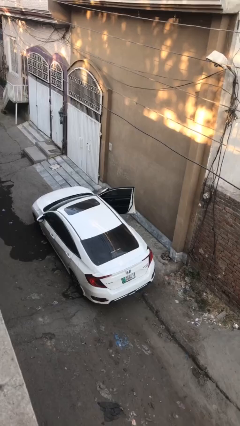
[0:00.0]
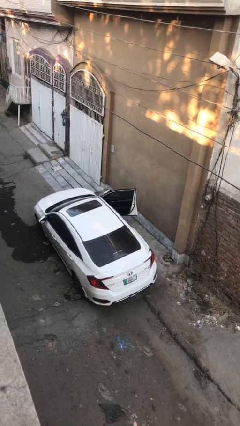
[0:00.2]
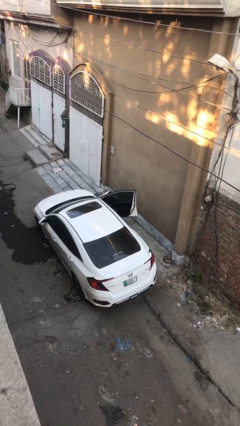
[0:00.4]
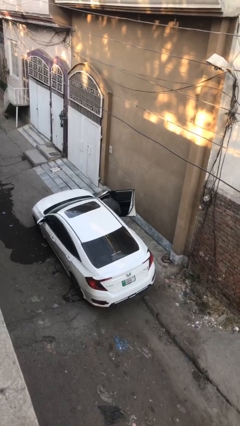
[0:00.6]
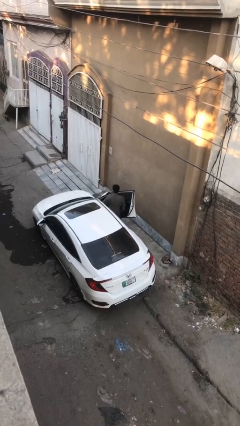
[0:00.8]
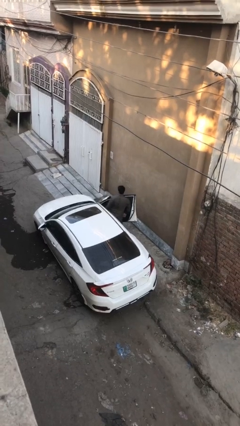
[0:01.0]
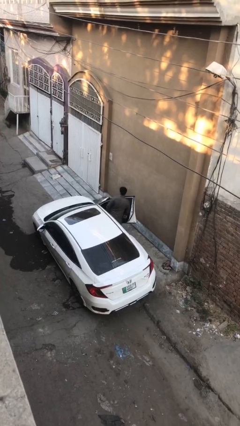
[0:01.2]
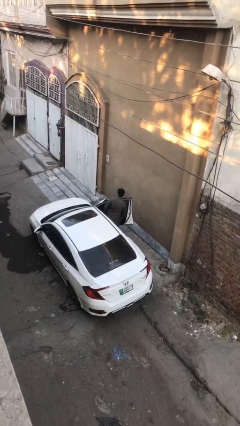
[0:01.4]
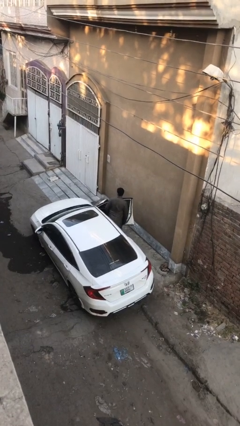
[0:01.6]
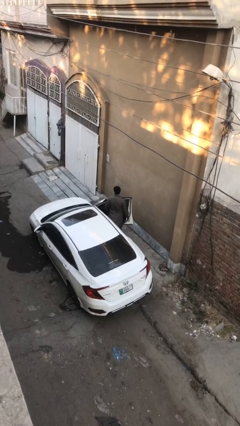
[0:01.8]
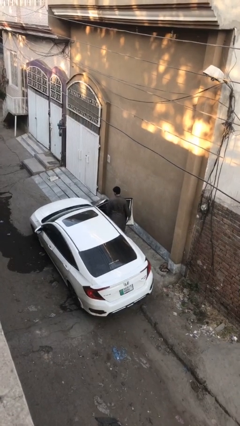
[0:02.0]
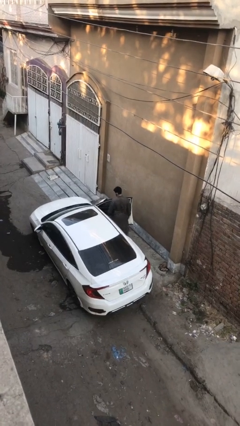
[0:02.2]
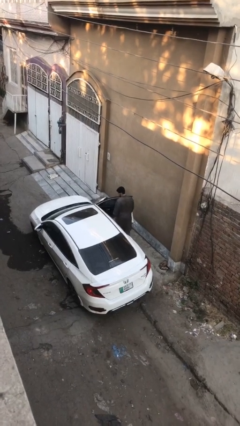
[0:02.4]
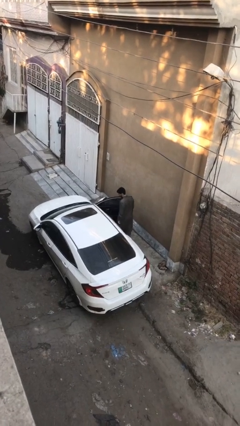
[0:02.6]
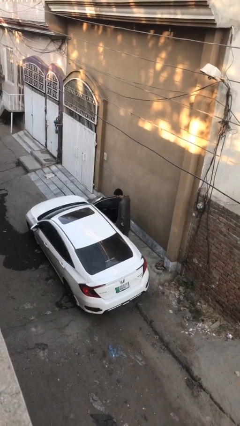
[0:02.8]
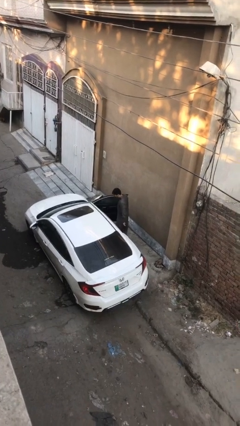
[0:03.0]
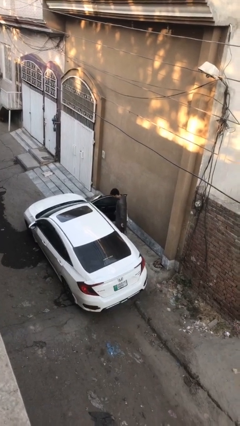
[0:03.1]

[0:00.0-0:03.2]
person exits car

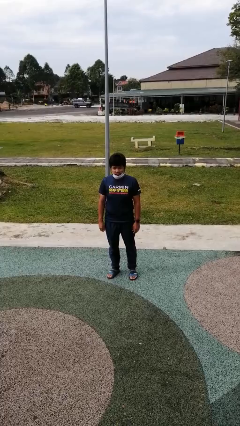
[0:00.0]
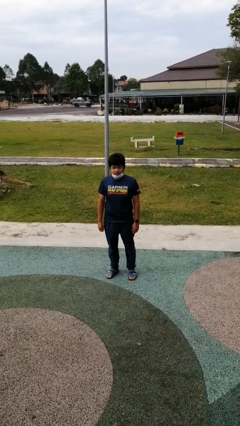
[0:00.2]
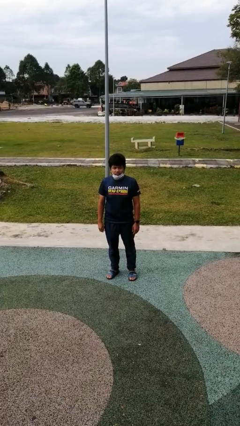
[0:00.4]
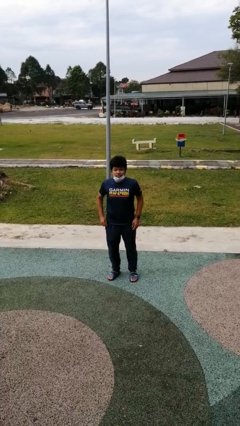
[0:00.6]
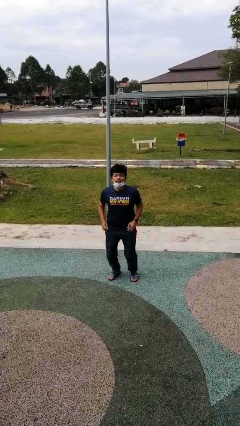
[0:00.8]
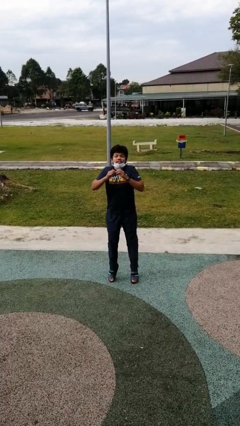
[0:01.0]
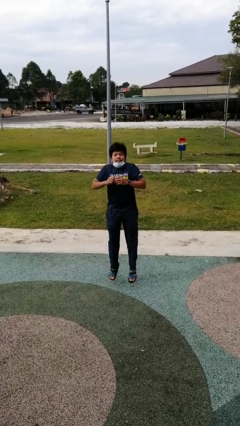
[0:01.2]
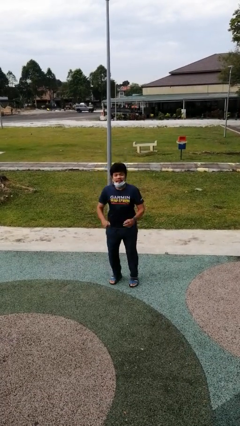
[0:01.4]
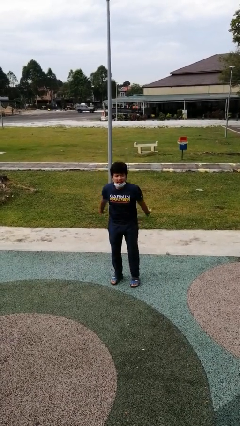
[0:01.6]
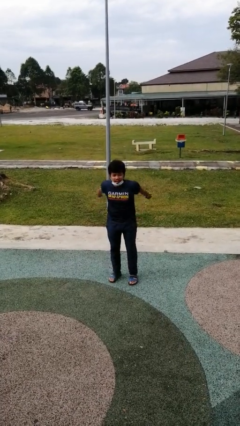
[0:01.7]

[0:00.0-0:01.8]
person jumps

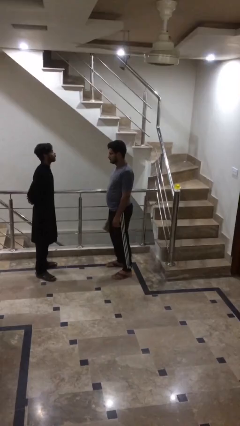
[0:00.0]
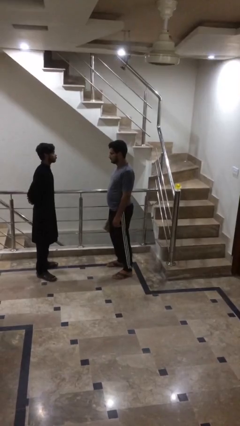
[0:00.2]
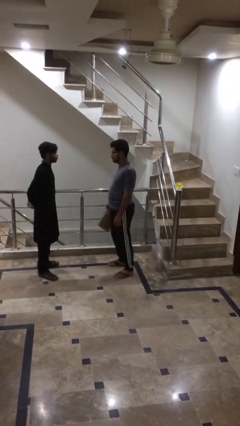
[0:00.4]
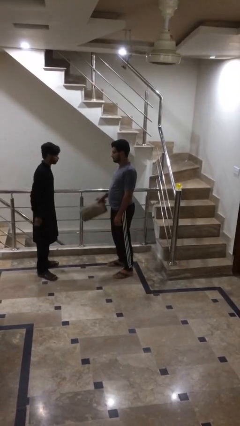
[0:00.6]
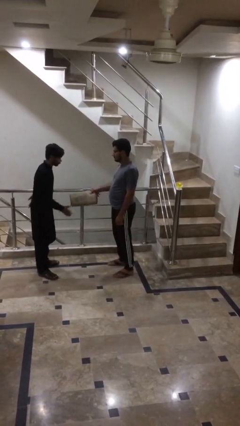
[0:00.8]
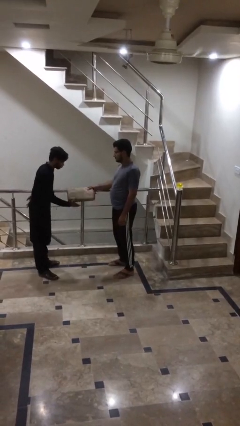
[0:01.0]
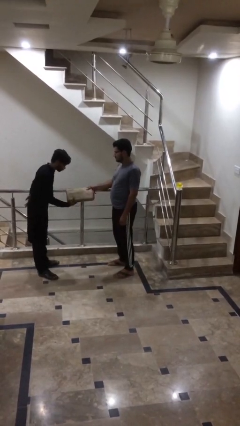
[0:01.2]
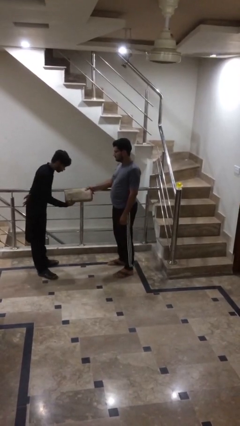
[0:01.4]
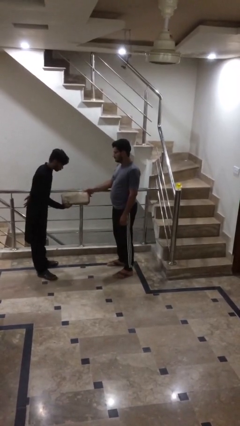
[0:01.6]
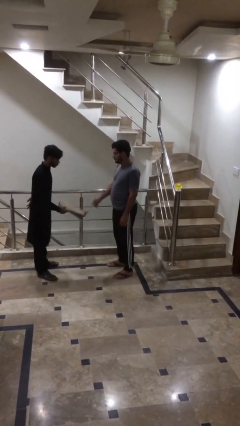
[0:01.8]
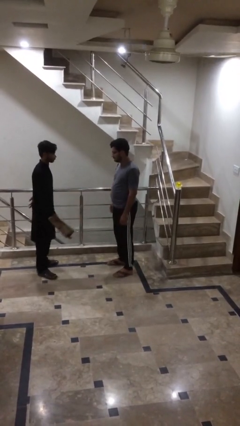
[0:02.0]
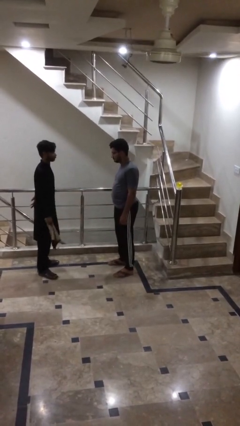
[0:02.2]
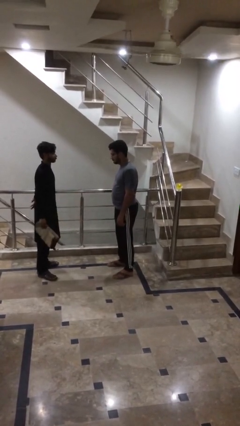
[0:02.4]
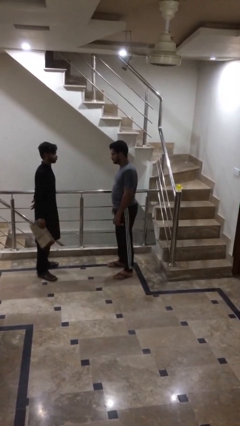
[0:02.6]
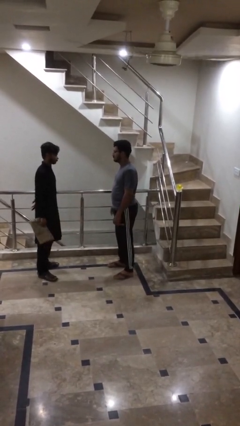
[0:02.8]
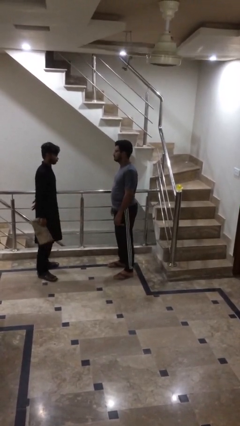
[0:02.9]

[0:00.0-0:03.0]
person transfers object to person

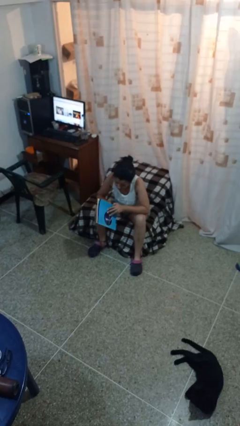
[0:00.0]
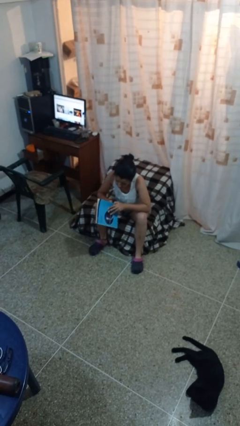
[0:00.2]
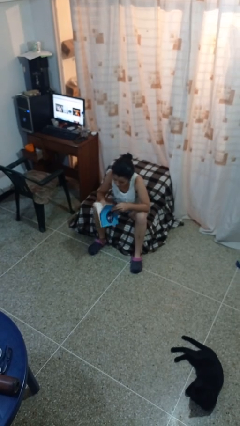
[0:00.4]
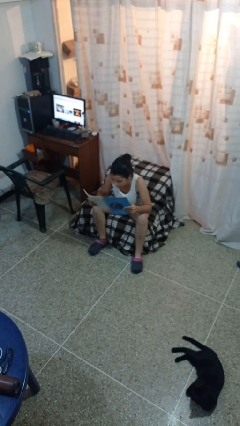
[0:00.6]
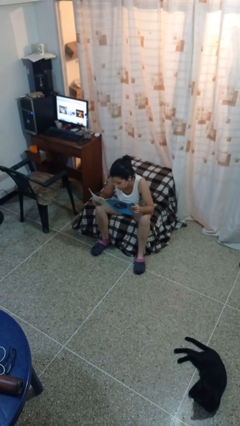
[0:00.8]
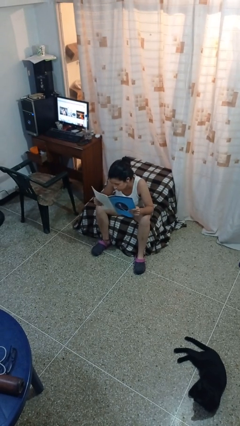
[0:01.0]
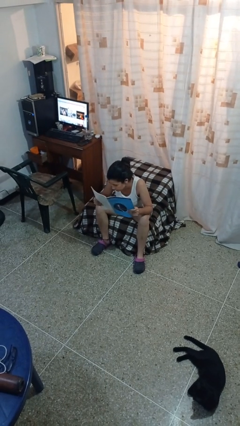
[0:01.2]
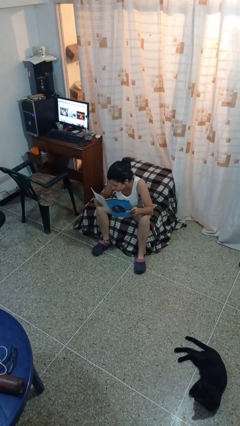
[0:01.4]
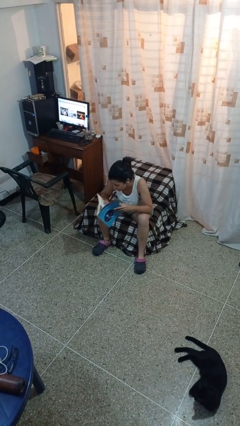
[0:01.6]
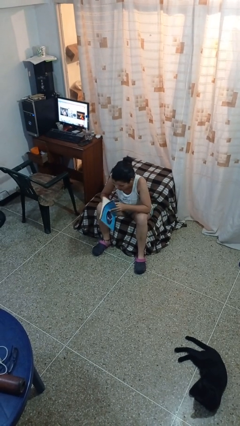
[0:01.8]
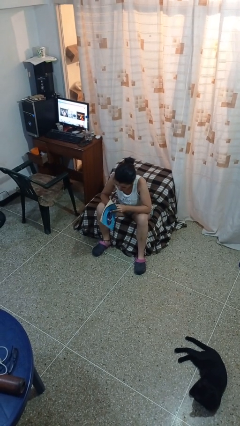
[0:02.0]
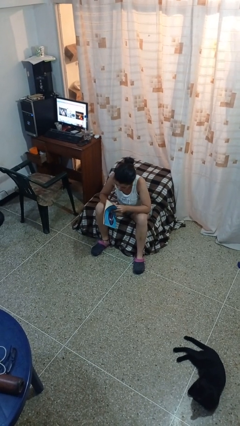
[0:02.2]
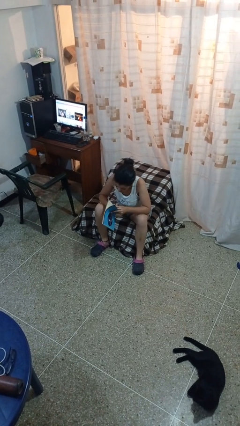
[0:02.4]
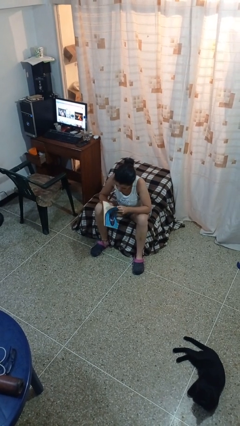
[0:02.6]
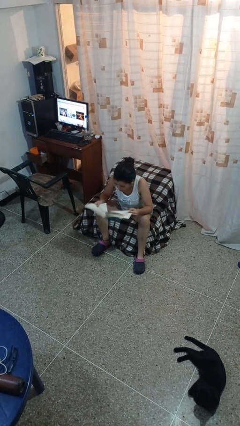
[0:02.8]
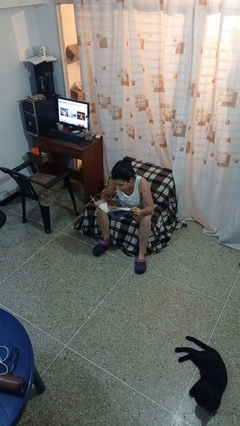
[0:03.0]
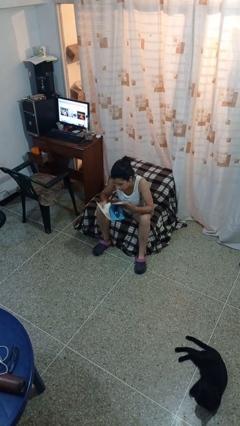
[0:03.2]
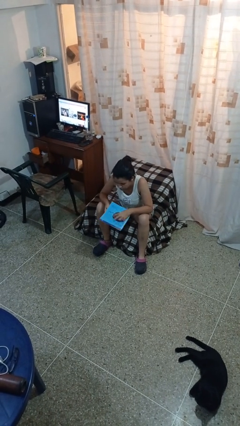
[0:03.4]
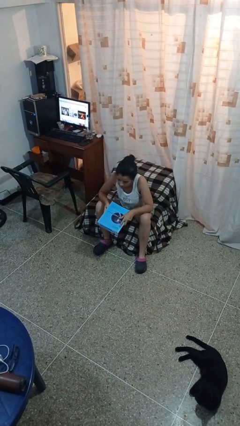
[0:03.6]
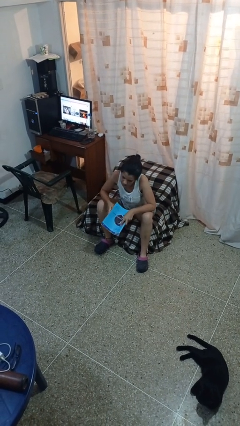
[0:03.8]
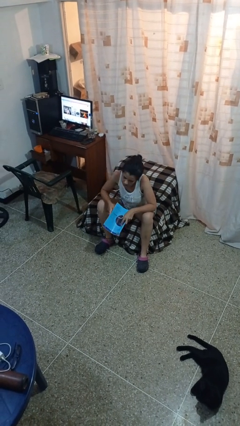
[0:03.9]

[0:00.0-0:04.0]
person reads magazine

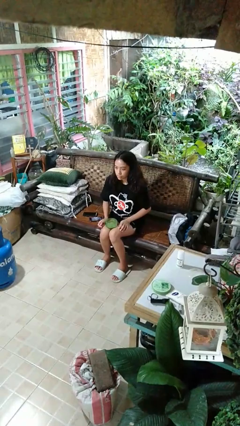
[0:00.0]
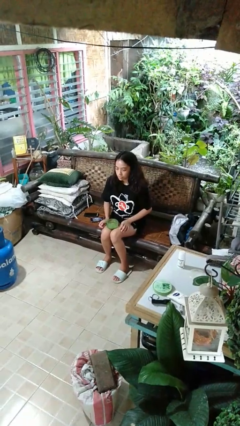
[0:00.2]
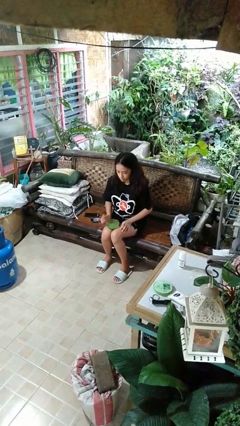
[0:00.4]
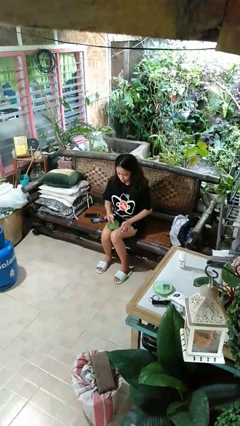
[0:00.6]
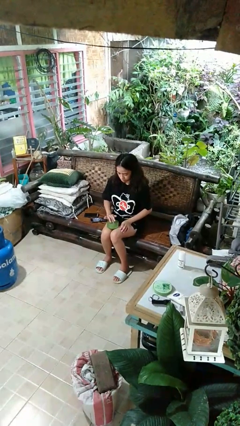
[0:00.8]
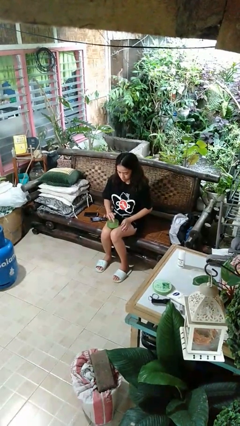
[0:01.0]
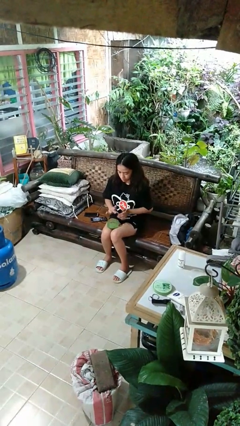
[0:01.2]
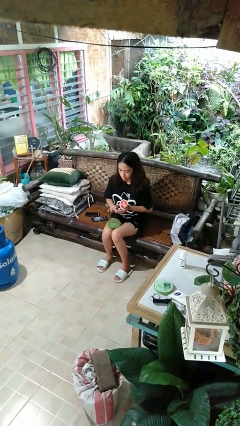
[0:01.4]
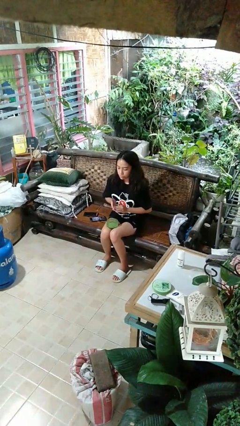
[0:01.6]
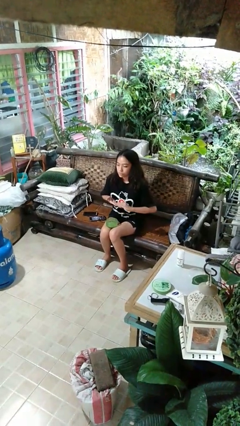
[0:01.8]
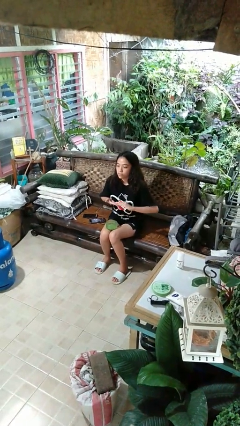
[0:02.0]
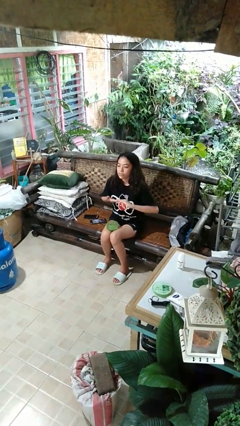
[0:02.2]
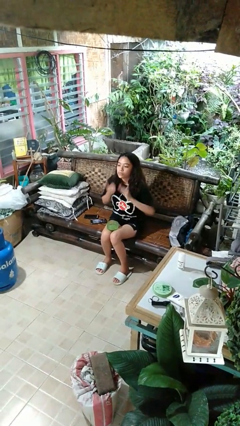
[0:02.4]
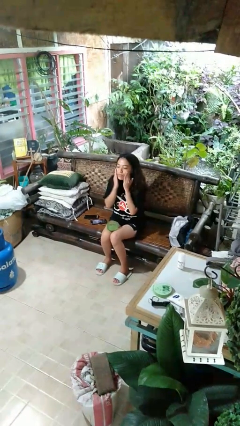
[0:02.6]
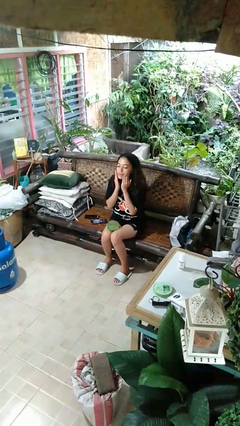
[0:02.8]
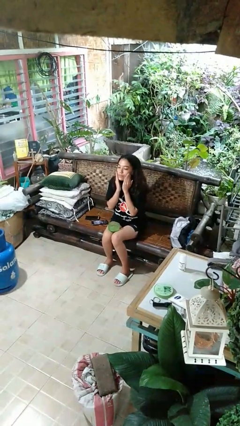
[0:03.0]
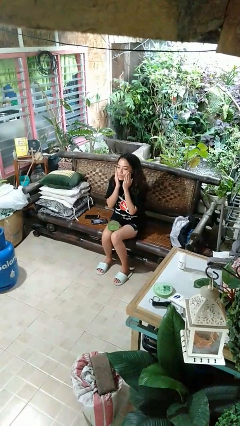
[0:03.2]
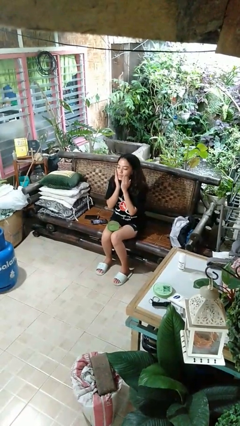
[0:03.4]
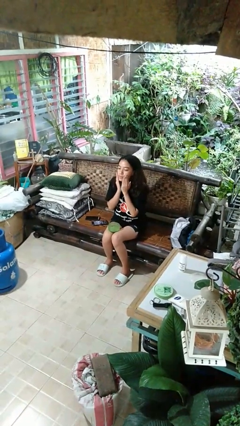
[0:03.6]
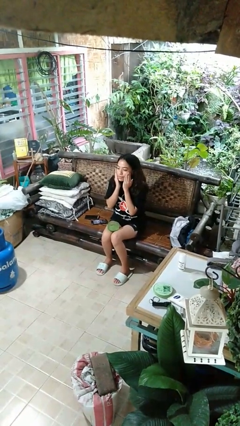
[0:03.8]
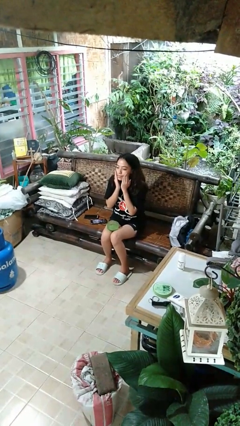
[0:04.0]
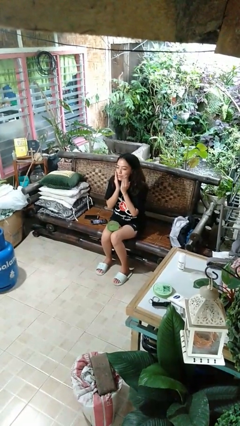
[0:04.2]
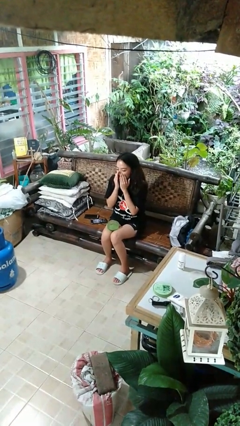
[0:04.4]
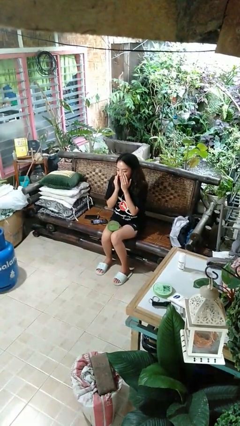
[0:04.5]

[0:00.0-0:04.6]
person applies facial moisturizer

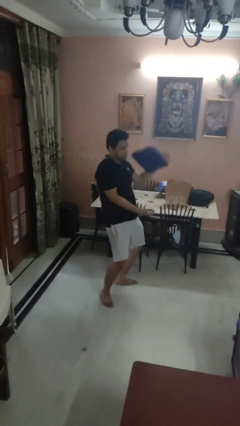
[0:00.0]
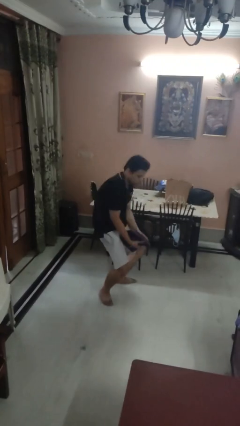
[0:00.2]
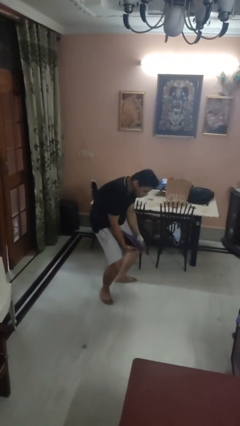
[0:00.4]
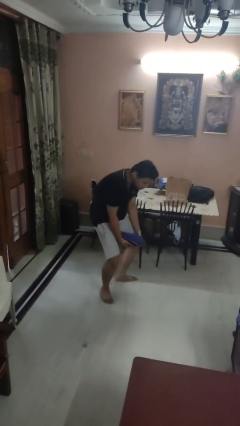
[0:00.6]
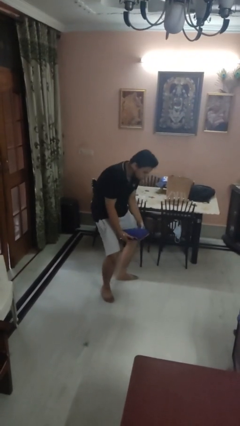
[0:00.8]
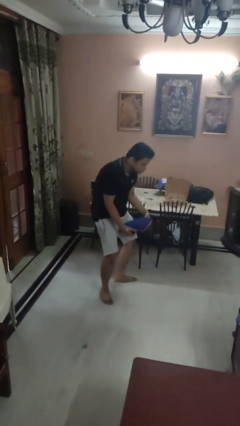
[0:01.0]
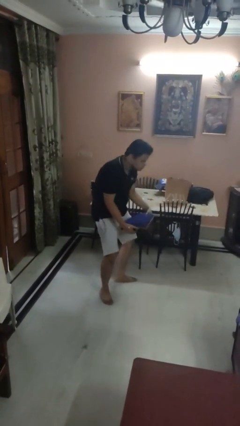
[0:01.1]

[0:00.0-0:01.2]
person catches dropped object
